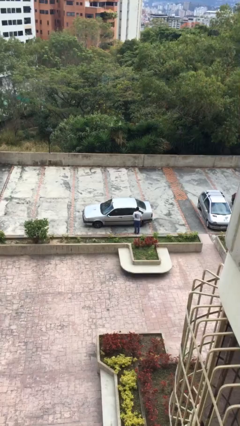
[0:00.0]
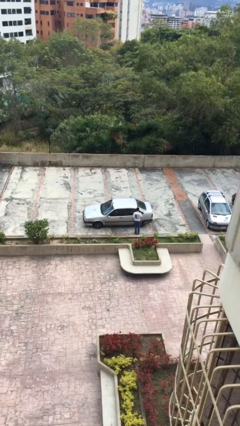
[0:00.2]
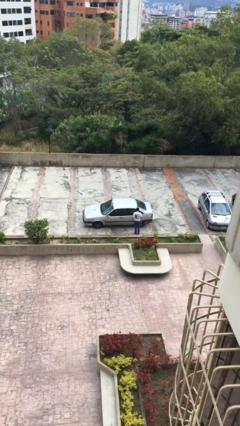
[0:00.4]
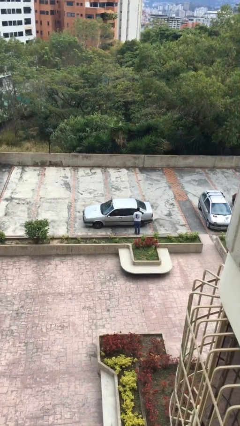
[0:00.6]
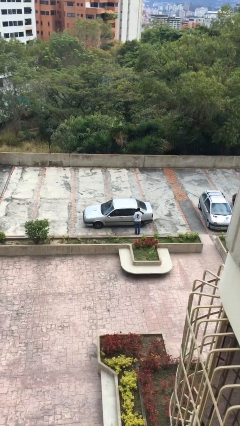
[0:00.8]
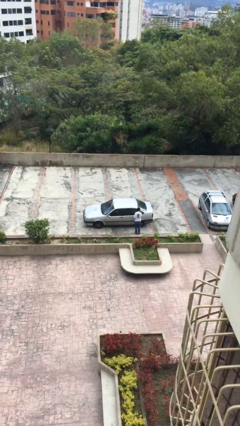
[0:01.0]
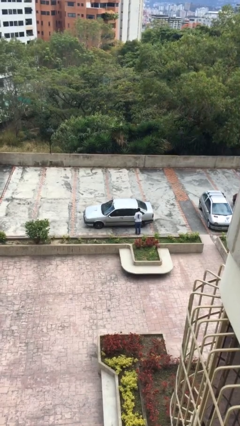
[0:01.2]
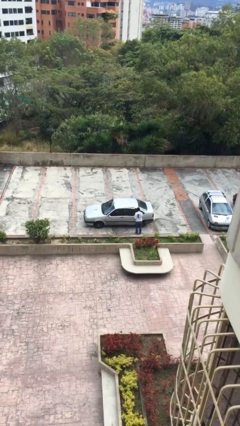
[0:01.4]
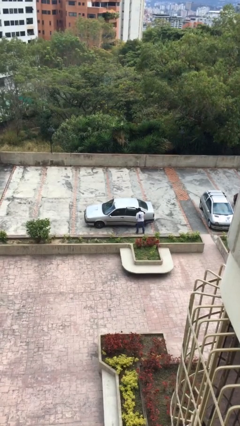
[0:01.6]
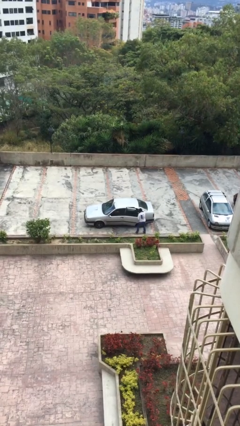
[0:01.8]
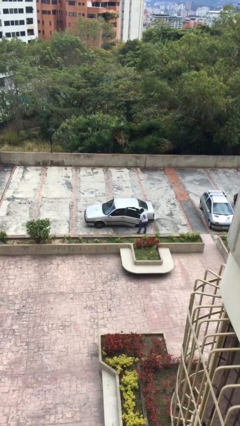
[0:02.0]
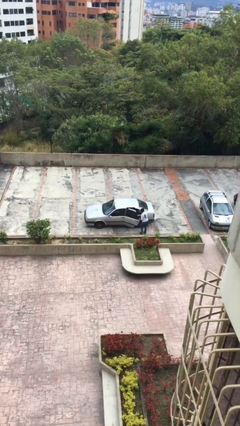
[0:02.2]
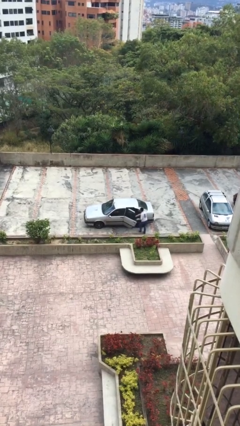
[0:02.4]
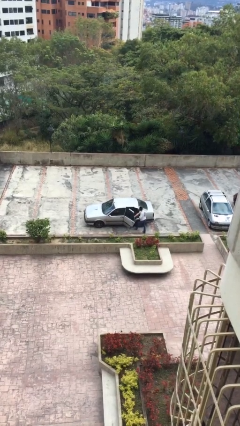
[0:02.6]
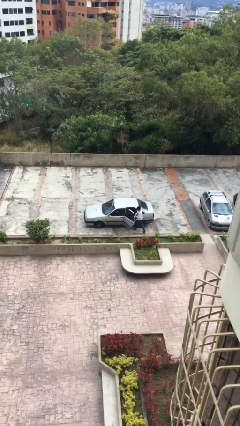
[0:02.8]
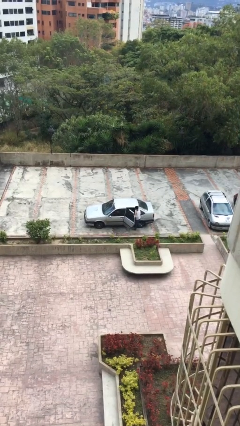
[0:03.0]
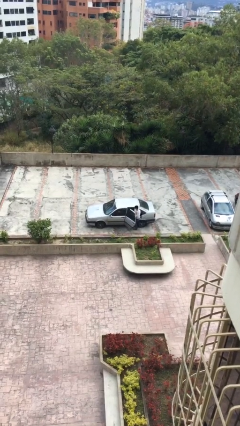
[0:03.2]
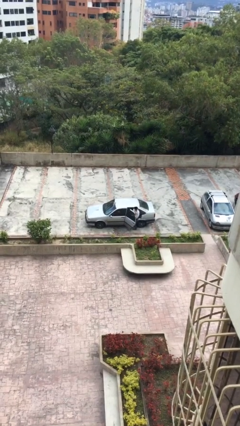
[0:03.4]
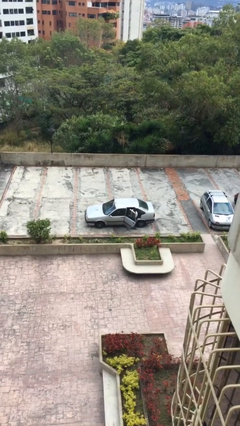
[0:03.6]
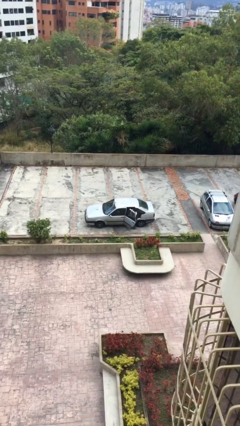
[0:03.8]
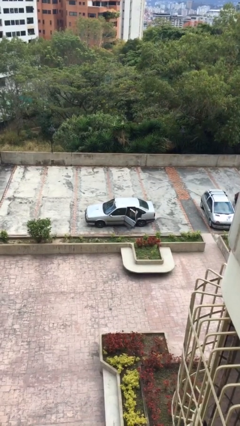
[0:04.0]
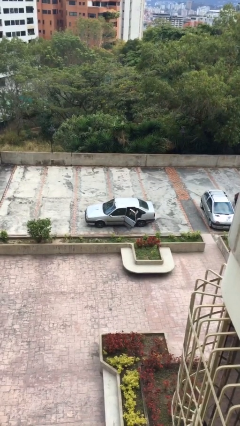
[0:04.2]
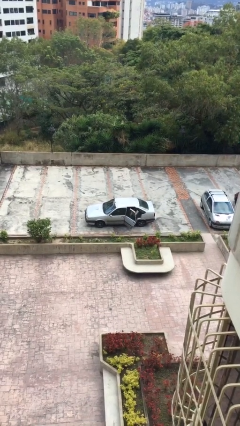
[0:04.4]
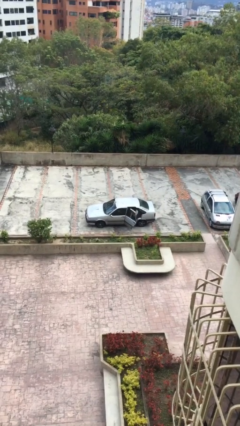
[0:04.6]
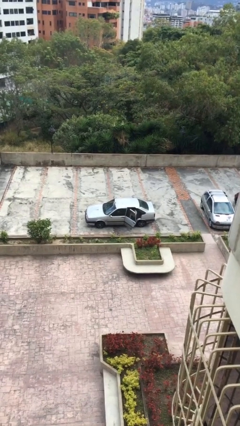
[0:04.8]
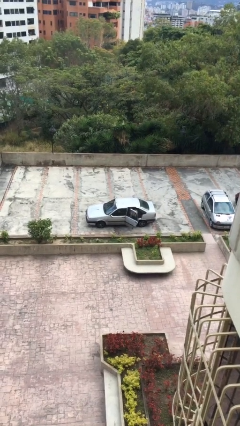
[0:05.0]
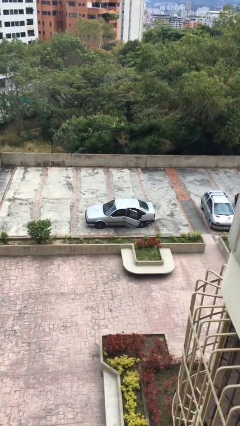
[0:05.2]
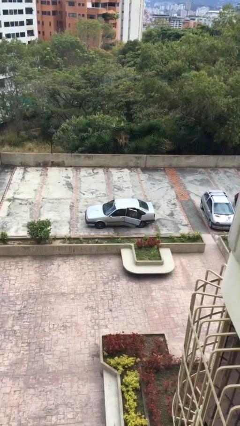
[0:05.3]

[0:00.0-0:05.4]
car picks up person

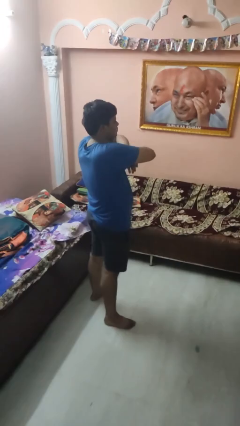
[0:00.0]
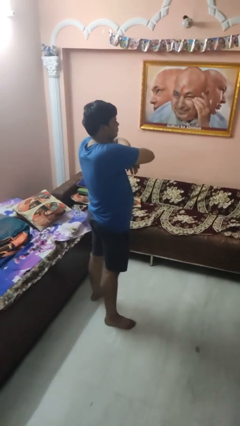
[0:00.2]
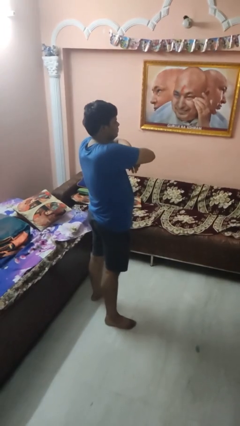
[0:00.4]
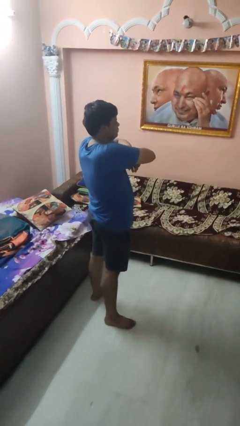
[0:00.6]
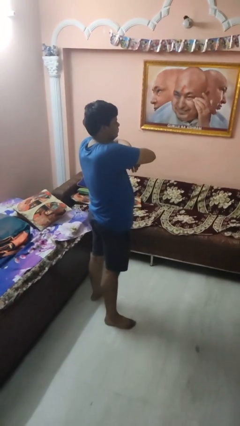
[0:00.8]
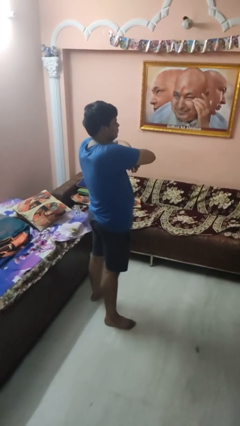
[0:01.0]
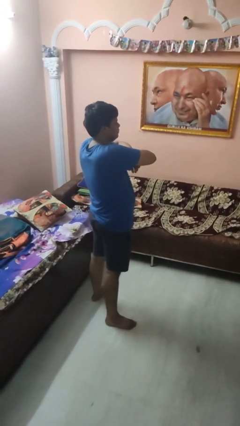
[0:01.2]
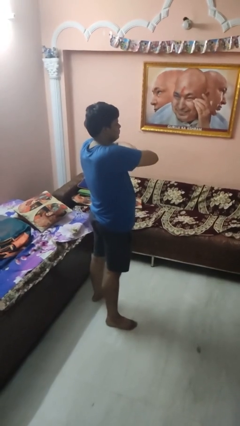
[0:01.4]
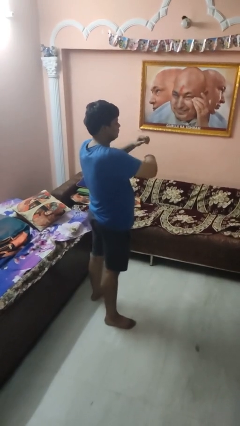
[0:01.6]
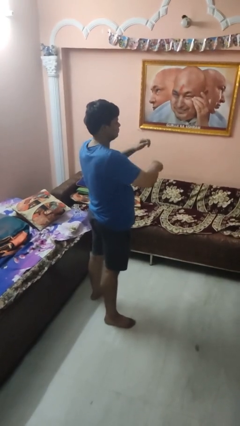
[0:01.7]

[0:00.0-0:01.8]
person crosses arms

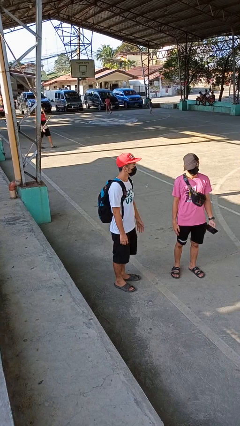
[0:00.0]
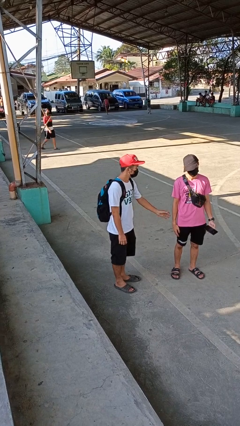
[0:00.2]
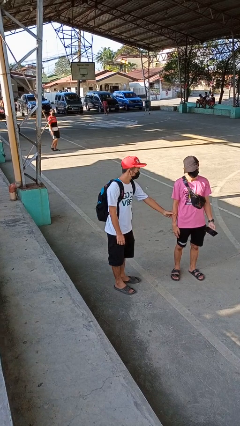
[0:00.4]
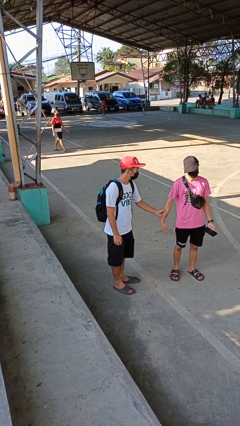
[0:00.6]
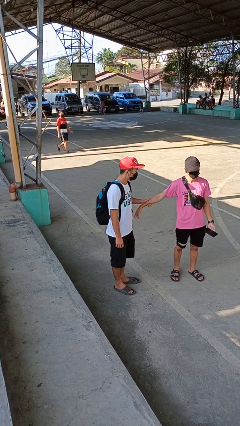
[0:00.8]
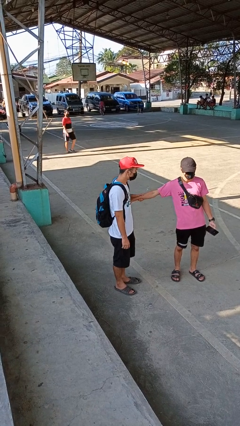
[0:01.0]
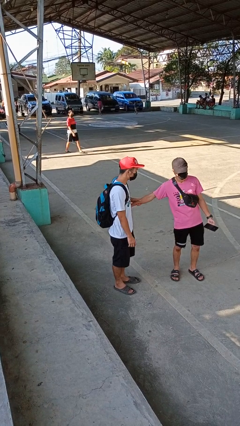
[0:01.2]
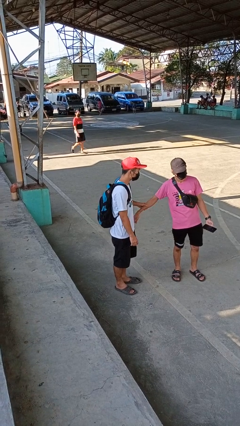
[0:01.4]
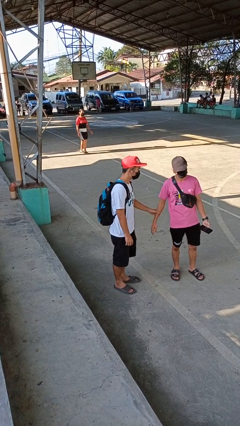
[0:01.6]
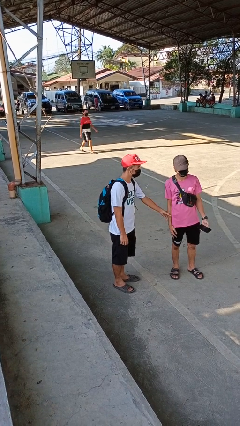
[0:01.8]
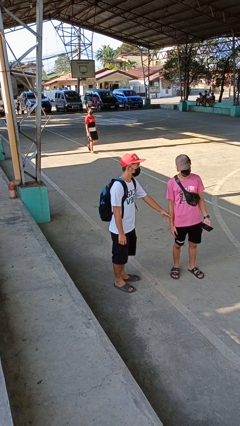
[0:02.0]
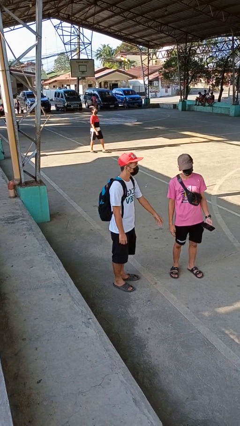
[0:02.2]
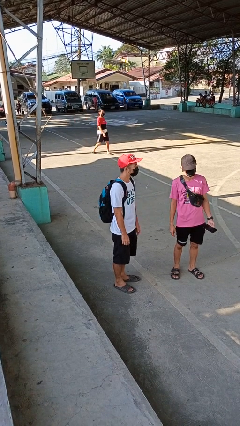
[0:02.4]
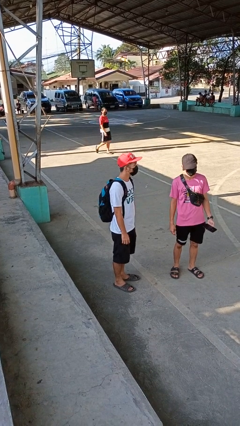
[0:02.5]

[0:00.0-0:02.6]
person grabs person by forearm

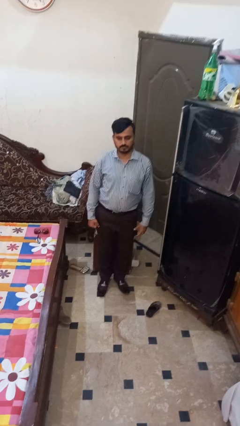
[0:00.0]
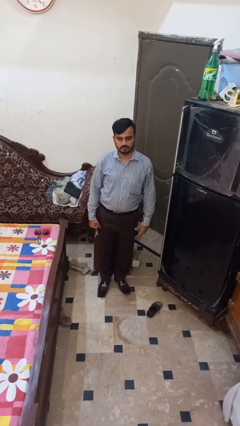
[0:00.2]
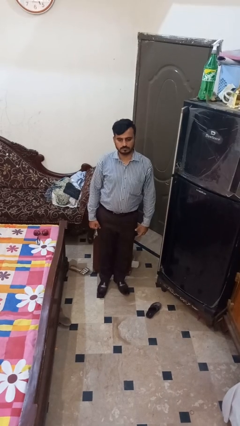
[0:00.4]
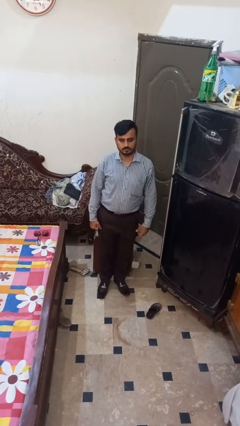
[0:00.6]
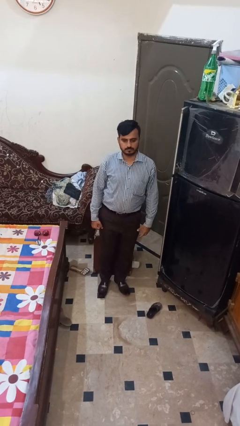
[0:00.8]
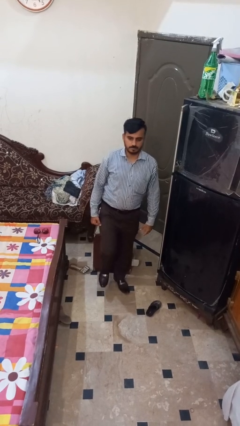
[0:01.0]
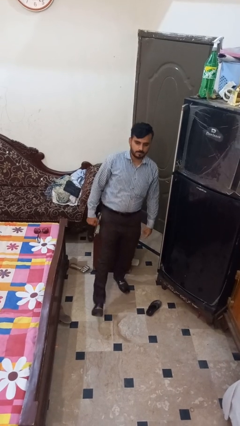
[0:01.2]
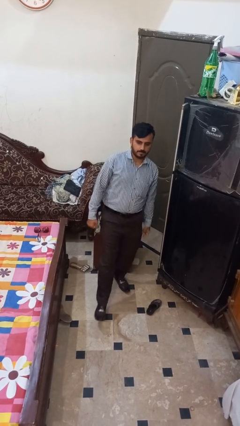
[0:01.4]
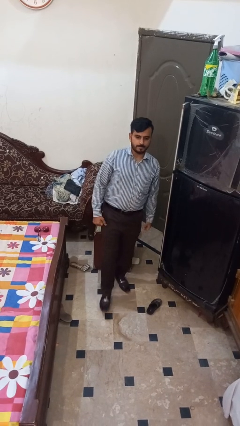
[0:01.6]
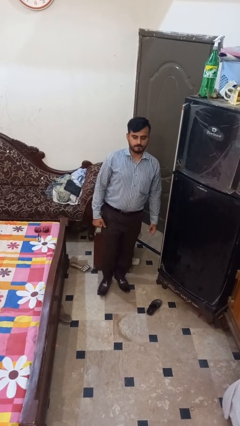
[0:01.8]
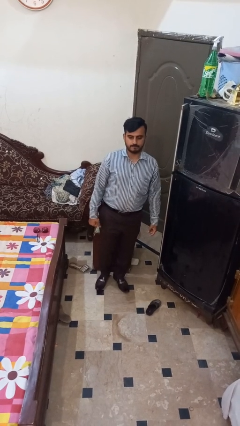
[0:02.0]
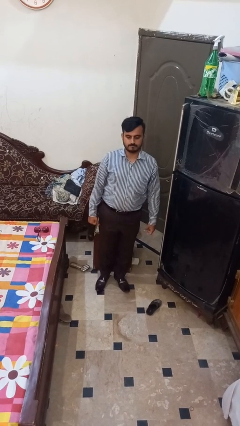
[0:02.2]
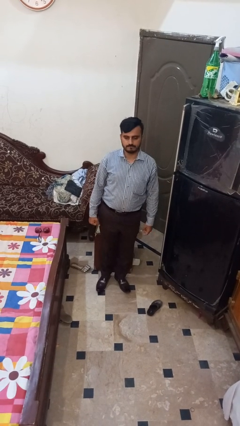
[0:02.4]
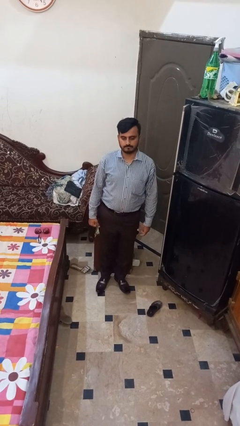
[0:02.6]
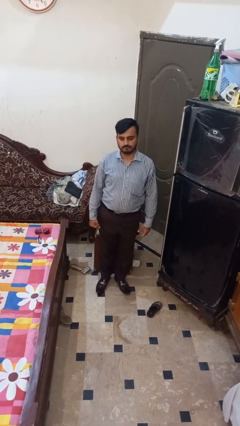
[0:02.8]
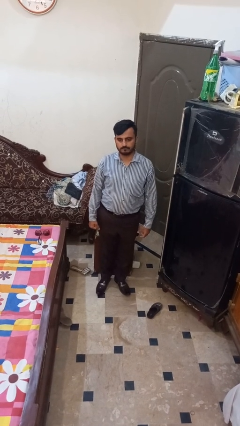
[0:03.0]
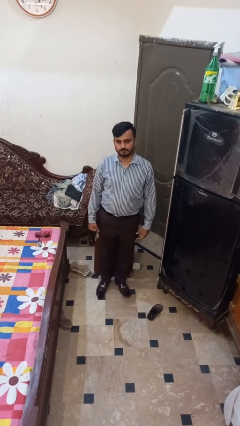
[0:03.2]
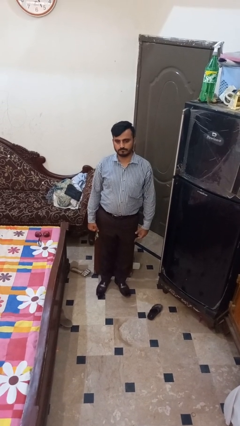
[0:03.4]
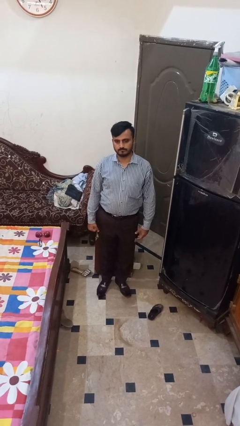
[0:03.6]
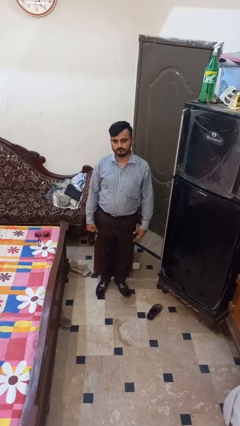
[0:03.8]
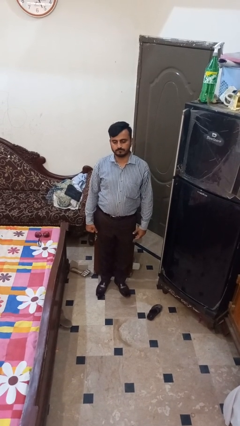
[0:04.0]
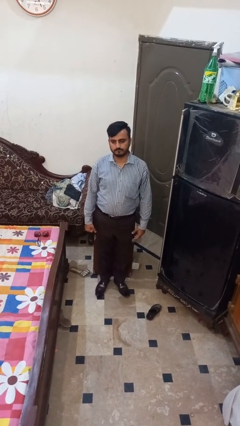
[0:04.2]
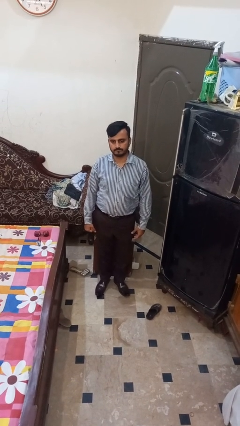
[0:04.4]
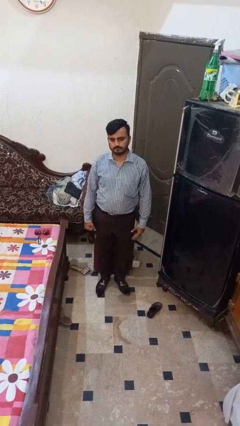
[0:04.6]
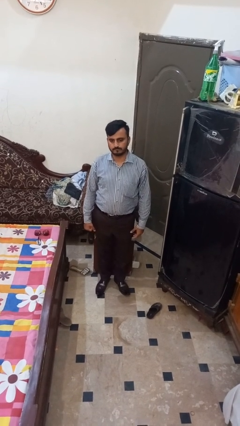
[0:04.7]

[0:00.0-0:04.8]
person karate kicks

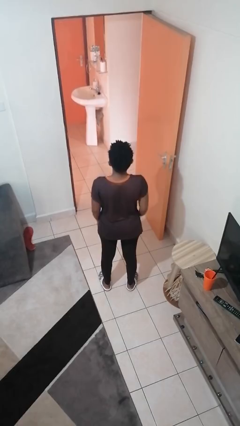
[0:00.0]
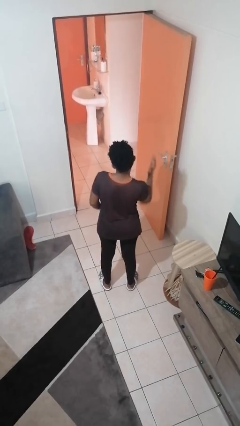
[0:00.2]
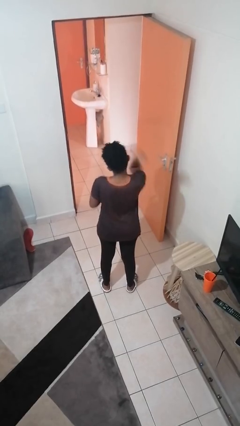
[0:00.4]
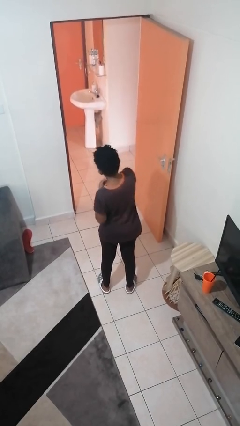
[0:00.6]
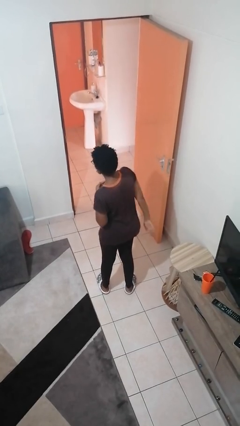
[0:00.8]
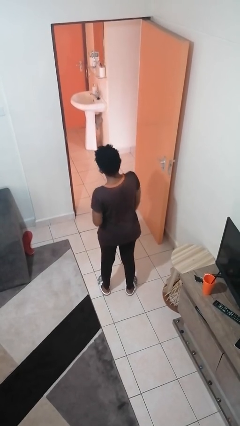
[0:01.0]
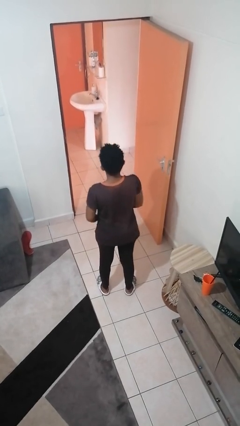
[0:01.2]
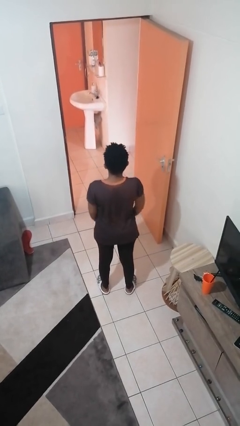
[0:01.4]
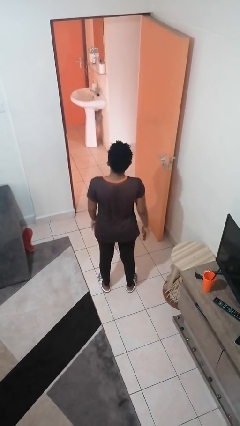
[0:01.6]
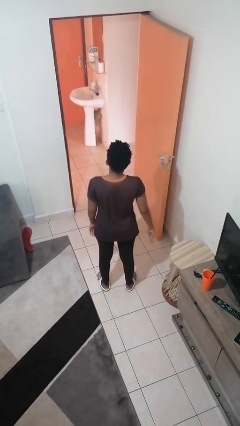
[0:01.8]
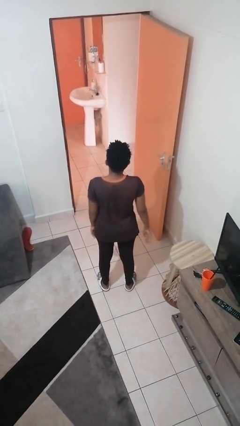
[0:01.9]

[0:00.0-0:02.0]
person karate chop

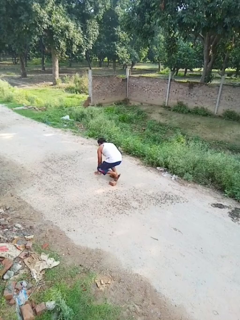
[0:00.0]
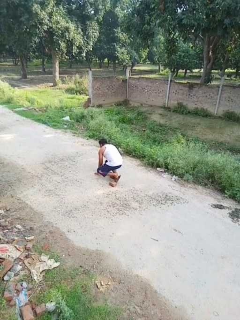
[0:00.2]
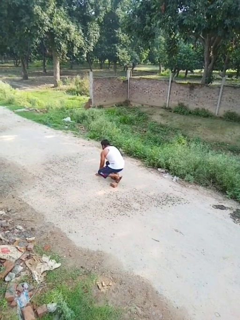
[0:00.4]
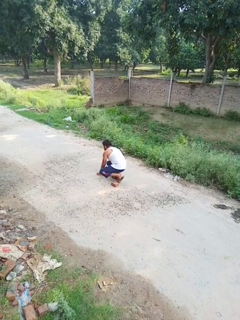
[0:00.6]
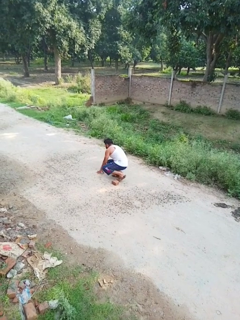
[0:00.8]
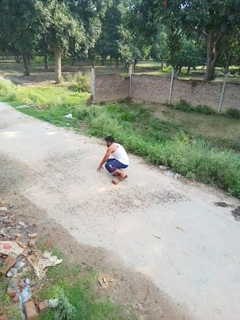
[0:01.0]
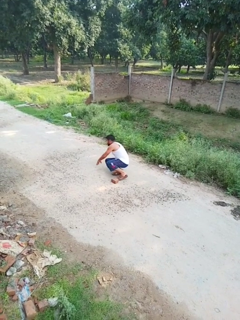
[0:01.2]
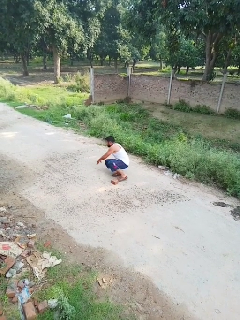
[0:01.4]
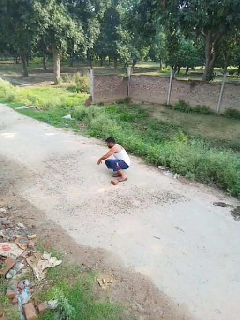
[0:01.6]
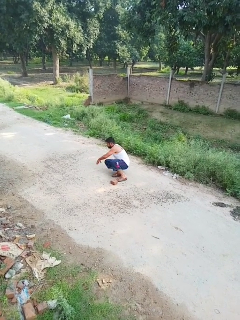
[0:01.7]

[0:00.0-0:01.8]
person lies down on floor
